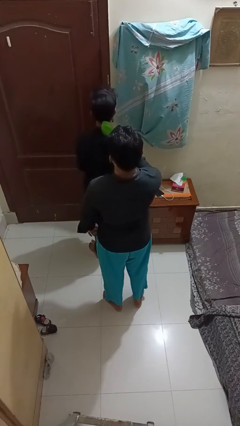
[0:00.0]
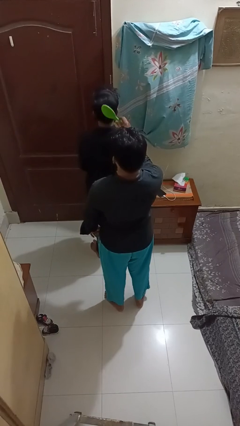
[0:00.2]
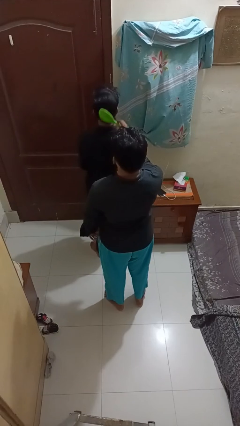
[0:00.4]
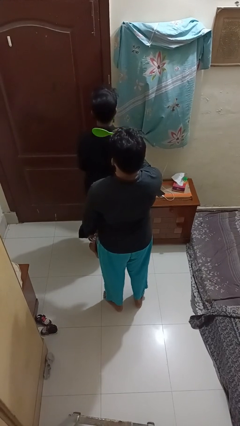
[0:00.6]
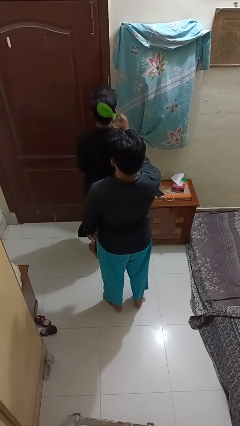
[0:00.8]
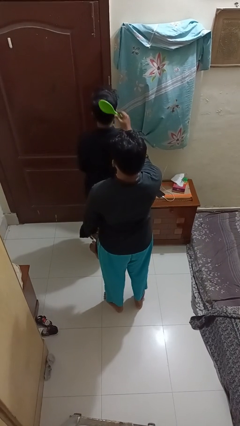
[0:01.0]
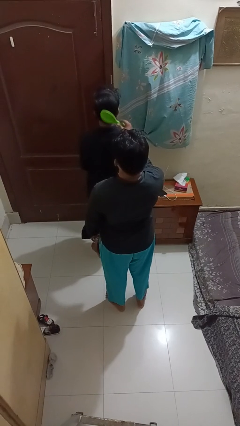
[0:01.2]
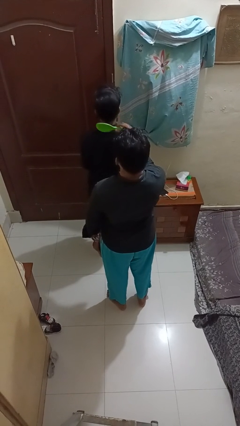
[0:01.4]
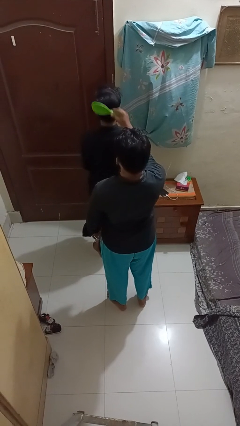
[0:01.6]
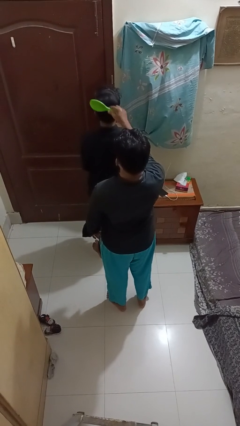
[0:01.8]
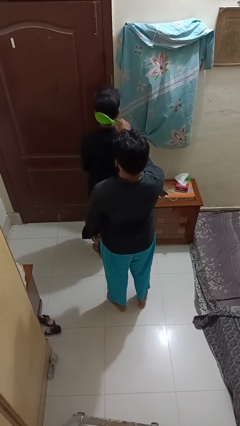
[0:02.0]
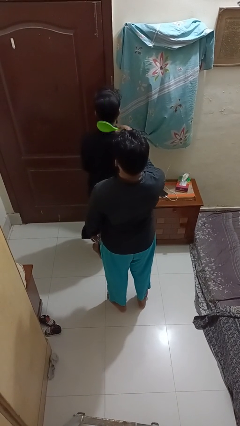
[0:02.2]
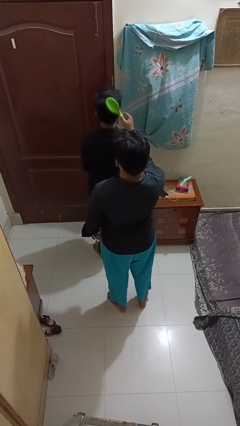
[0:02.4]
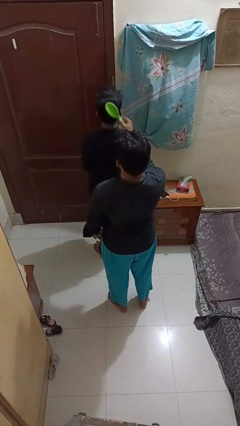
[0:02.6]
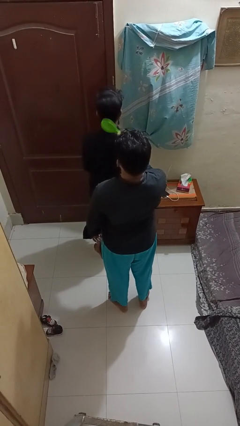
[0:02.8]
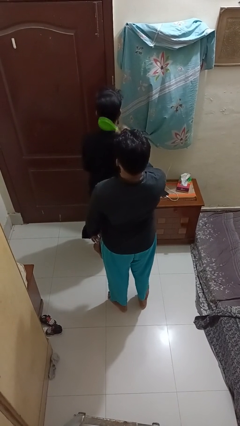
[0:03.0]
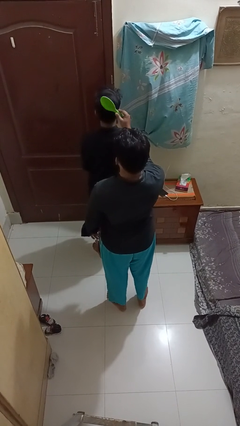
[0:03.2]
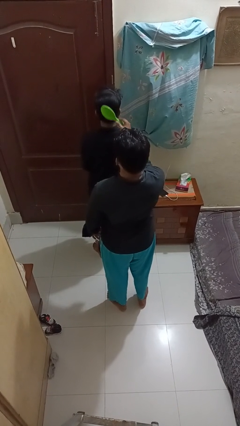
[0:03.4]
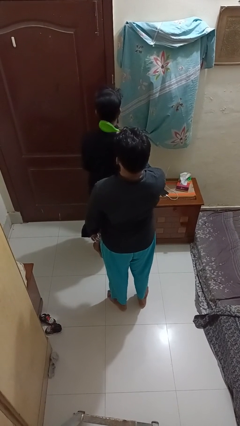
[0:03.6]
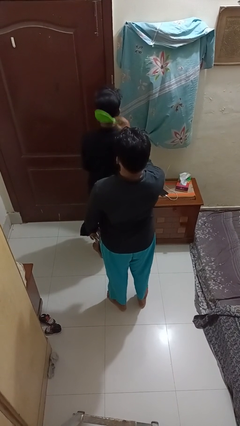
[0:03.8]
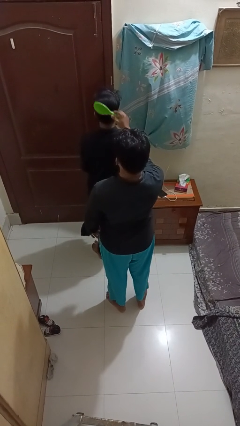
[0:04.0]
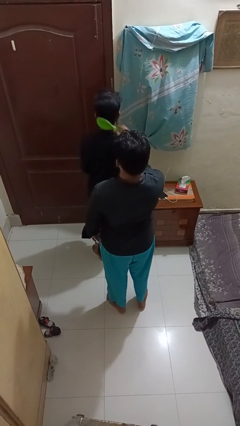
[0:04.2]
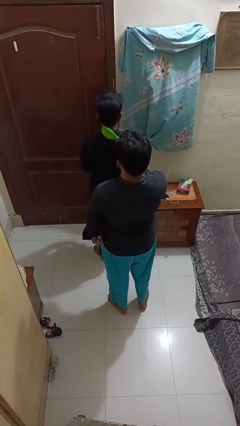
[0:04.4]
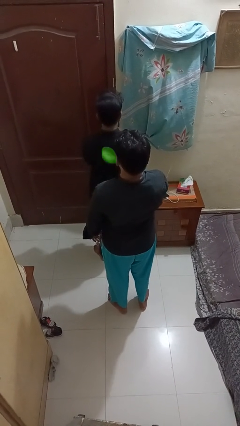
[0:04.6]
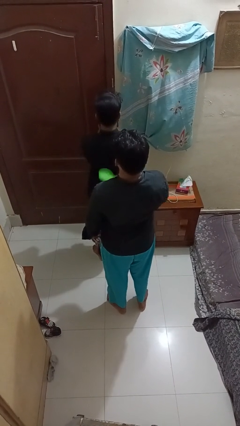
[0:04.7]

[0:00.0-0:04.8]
person brushes hair of person

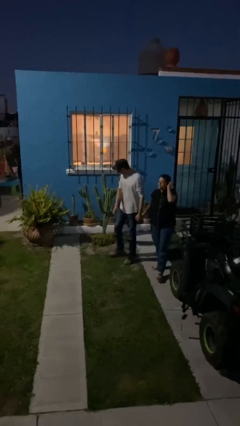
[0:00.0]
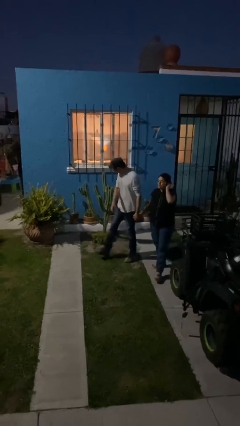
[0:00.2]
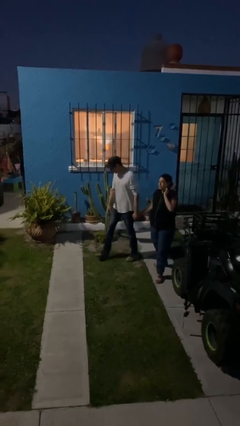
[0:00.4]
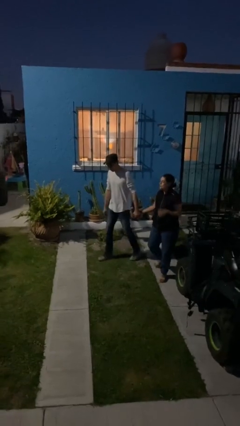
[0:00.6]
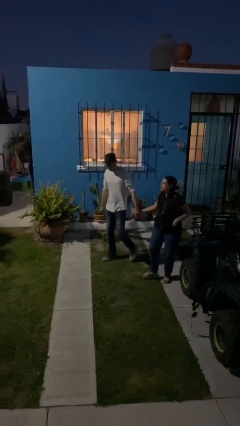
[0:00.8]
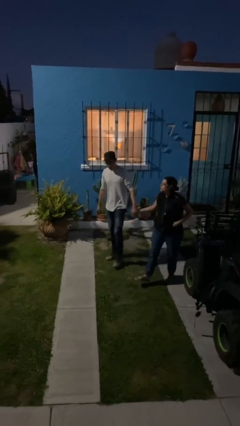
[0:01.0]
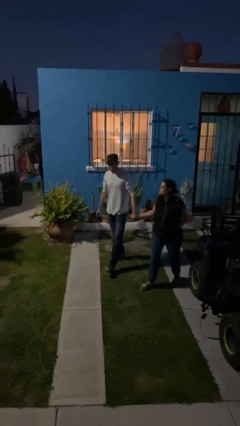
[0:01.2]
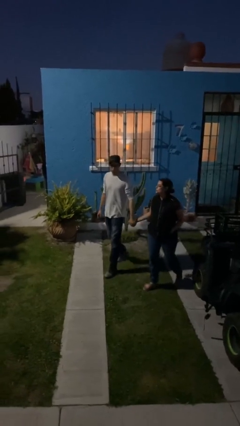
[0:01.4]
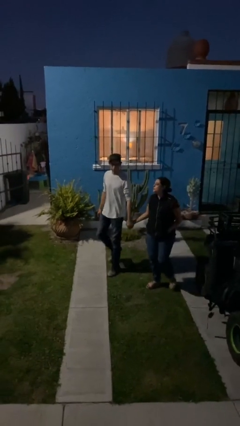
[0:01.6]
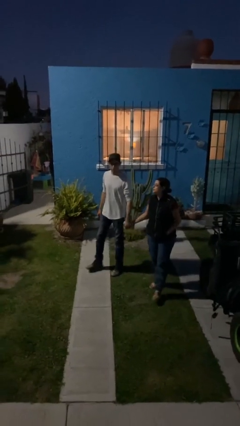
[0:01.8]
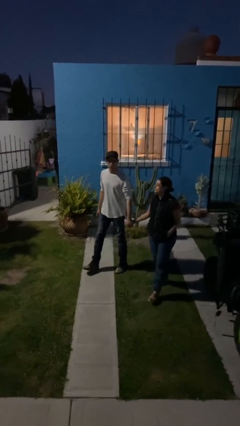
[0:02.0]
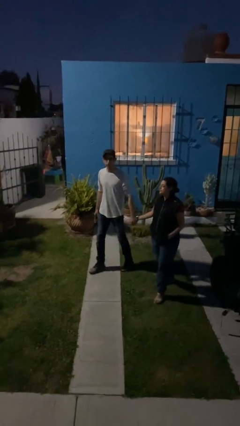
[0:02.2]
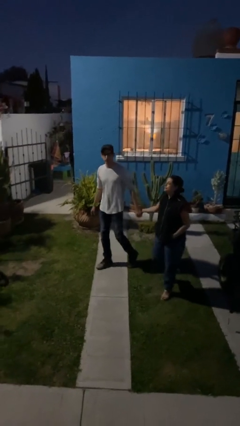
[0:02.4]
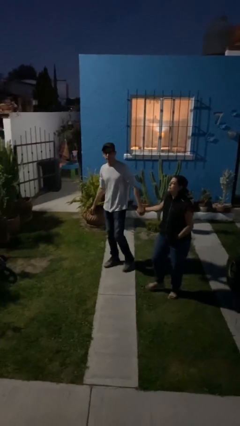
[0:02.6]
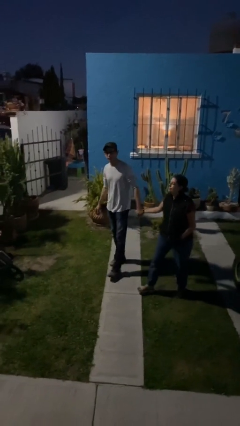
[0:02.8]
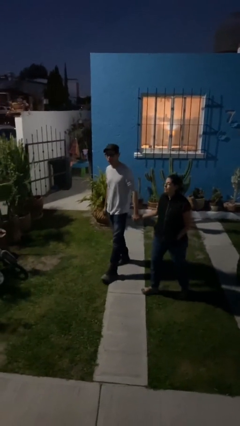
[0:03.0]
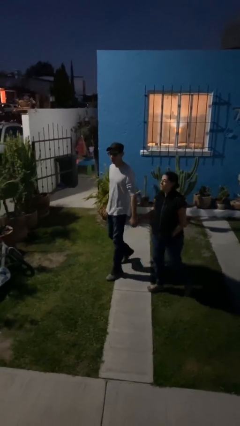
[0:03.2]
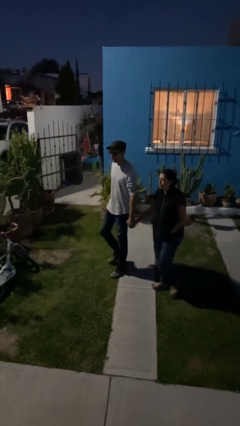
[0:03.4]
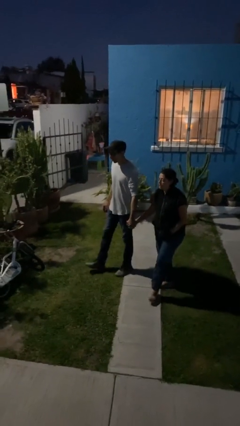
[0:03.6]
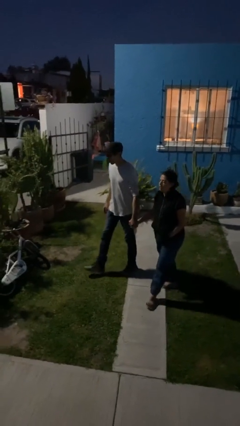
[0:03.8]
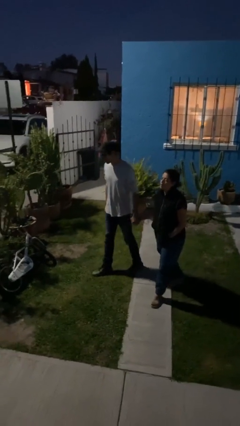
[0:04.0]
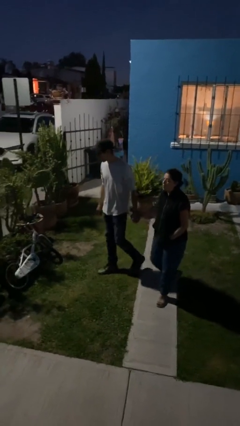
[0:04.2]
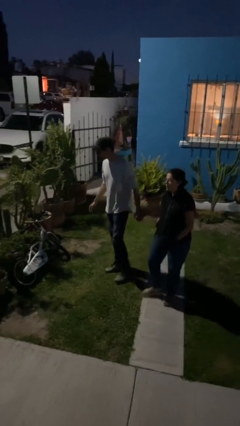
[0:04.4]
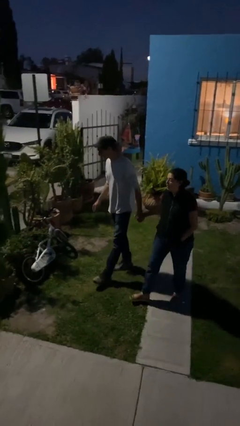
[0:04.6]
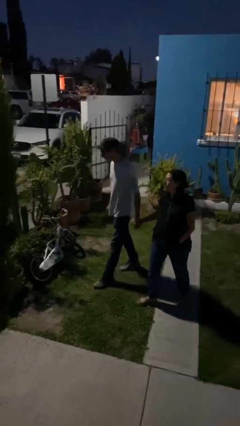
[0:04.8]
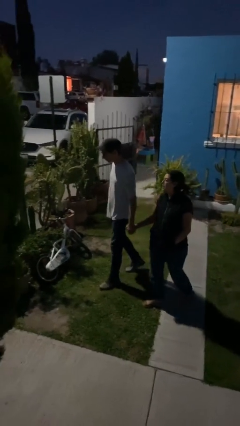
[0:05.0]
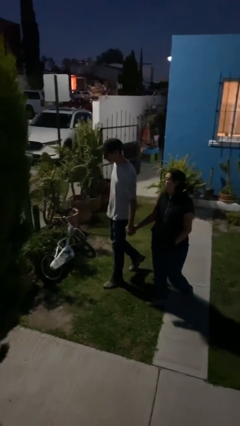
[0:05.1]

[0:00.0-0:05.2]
person holds hand

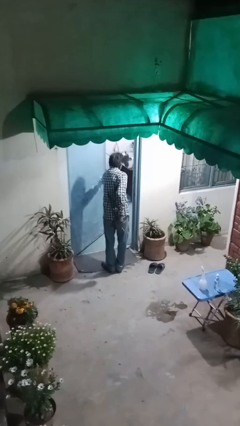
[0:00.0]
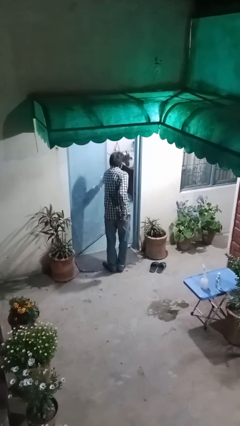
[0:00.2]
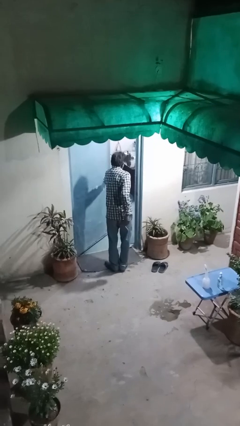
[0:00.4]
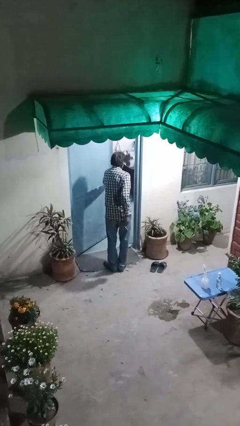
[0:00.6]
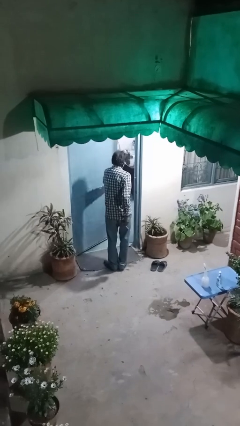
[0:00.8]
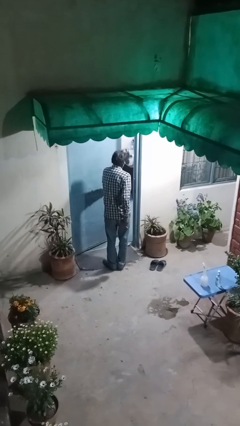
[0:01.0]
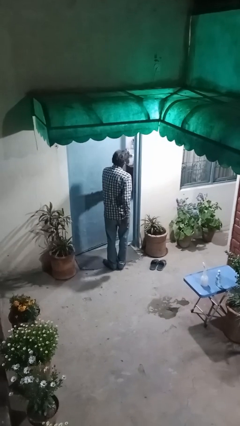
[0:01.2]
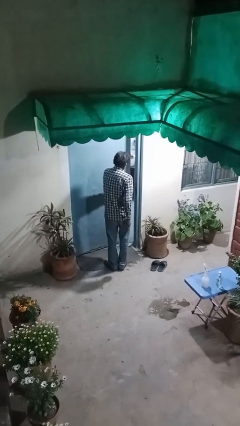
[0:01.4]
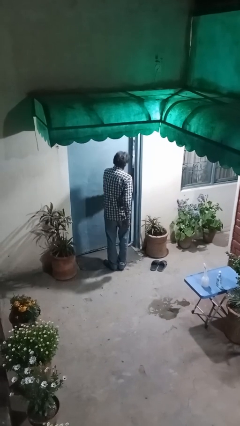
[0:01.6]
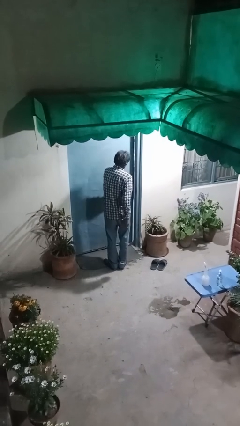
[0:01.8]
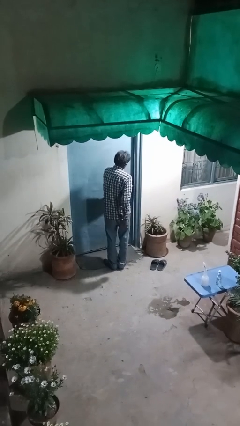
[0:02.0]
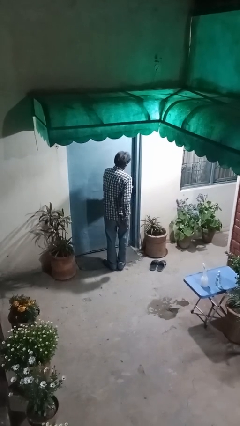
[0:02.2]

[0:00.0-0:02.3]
person closes facility door

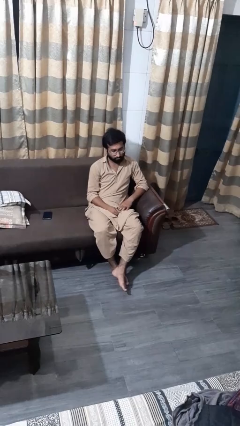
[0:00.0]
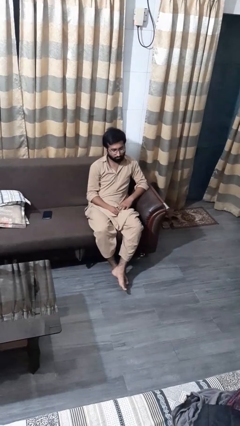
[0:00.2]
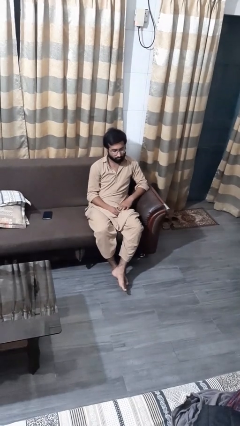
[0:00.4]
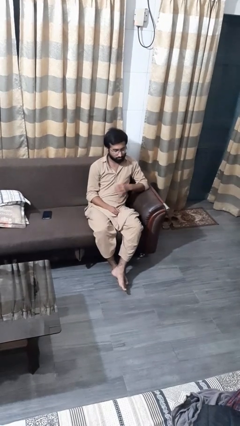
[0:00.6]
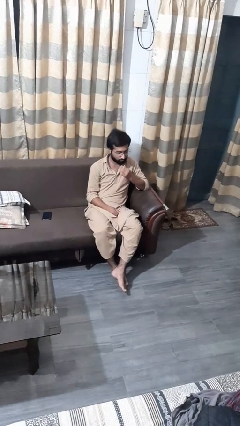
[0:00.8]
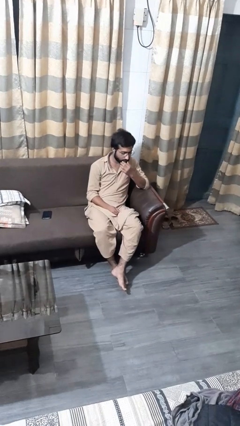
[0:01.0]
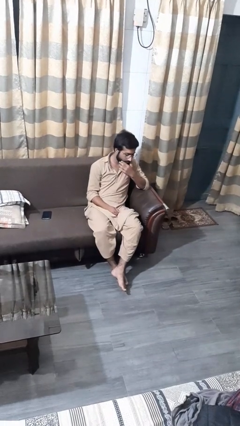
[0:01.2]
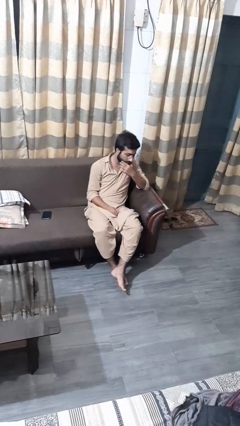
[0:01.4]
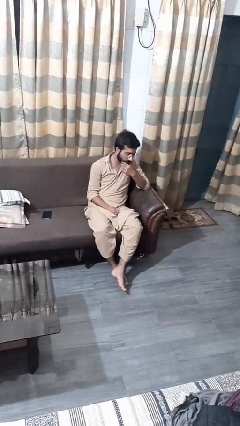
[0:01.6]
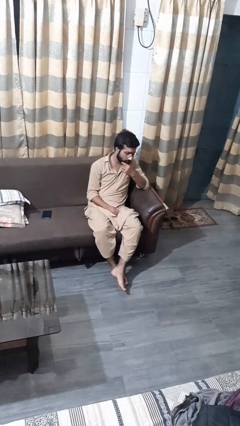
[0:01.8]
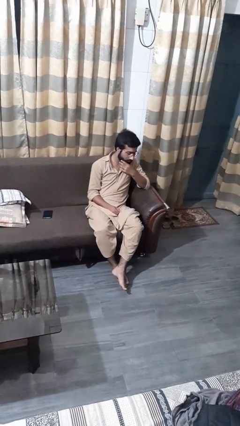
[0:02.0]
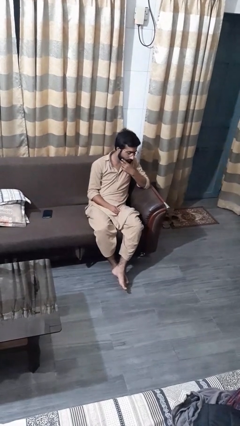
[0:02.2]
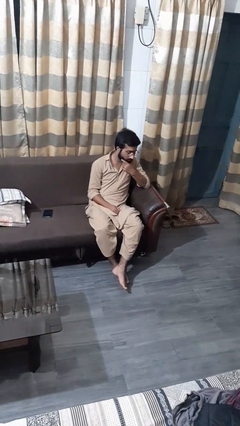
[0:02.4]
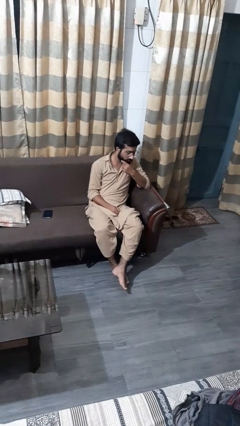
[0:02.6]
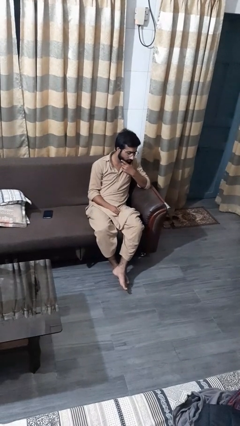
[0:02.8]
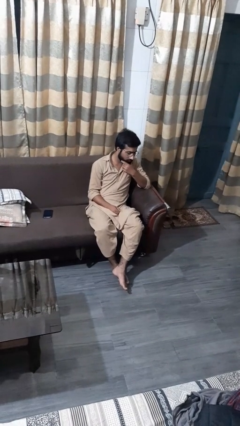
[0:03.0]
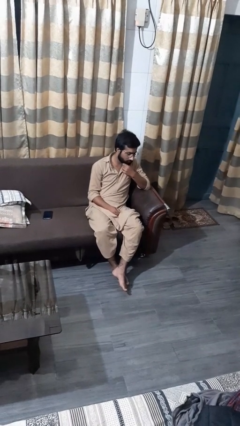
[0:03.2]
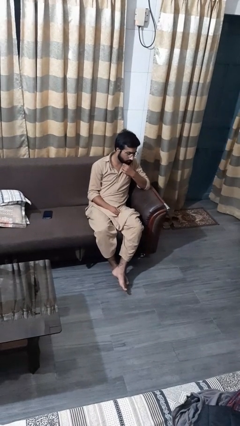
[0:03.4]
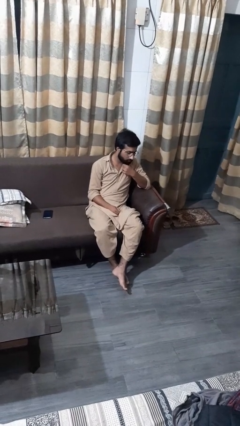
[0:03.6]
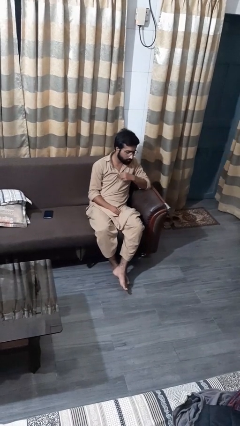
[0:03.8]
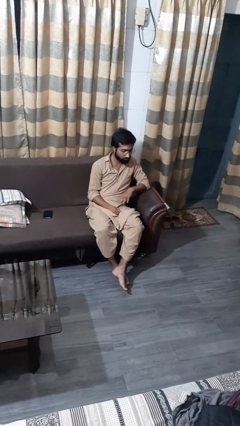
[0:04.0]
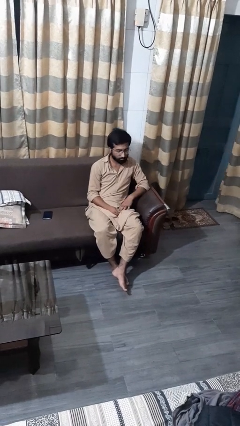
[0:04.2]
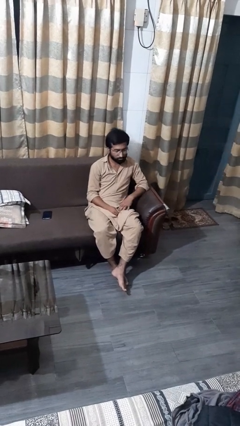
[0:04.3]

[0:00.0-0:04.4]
person strokes chin

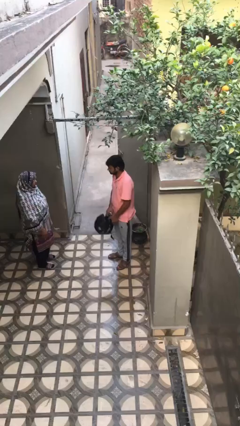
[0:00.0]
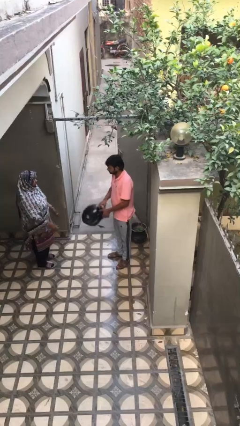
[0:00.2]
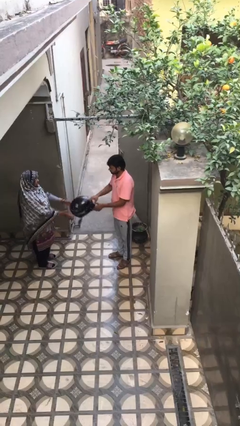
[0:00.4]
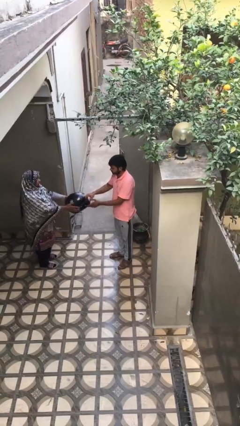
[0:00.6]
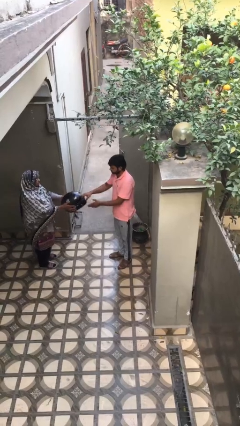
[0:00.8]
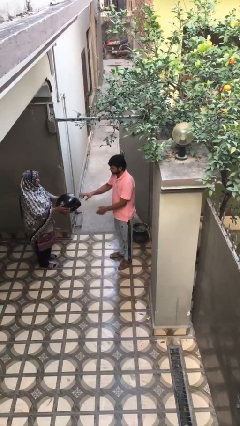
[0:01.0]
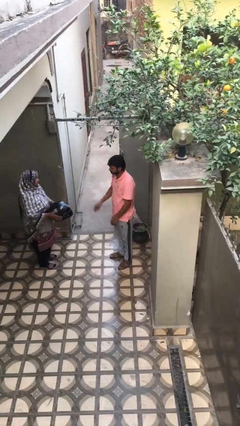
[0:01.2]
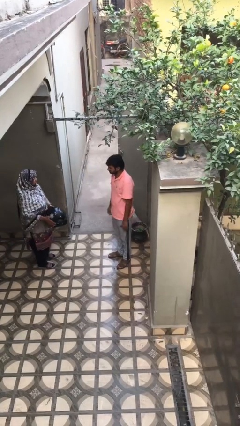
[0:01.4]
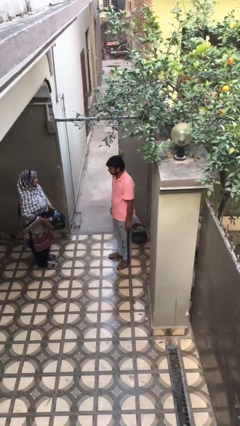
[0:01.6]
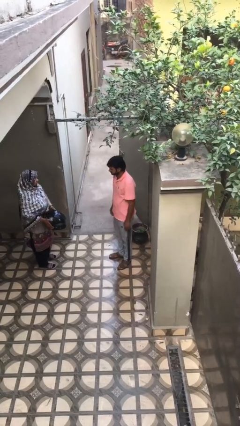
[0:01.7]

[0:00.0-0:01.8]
person transfers object to person
